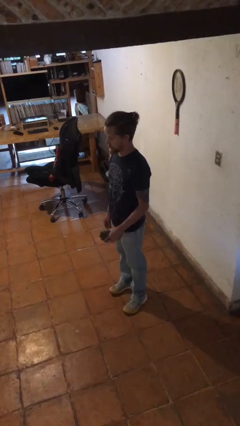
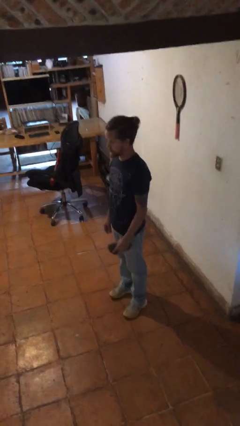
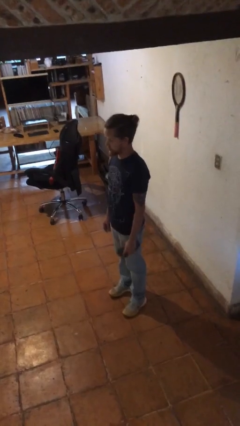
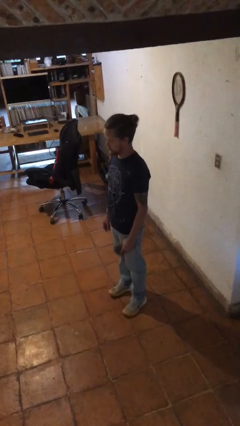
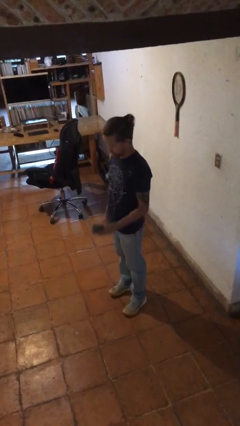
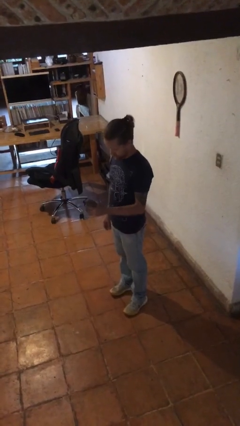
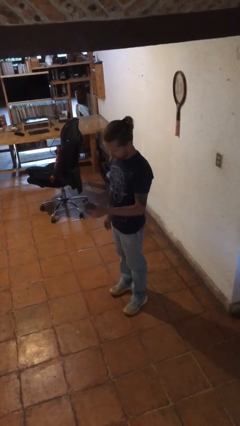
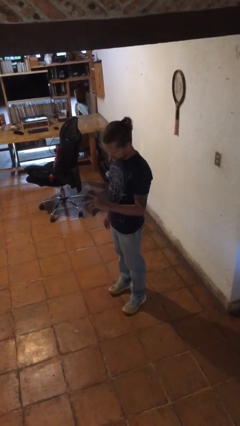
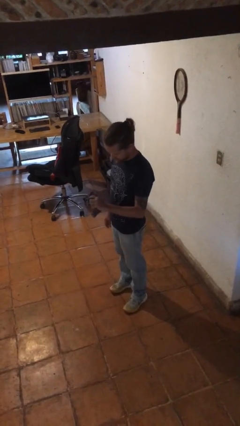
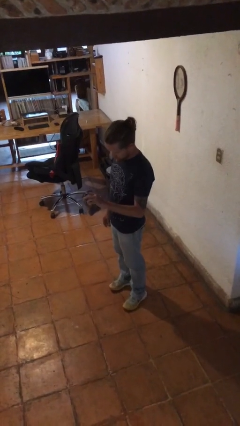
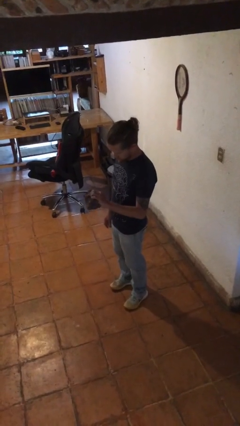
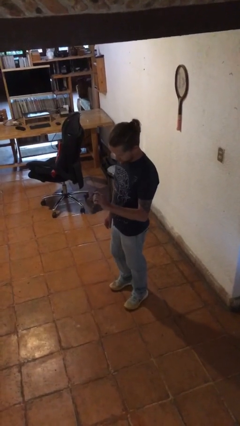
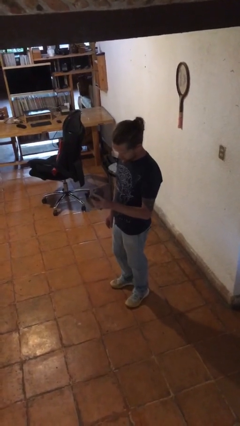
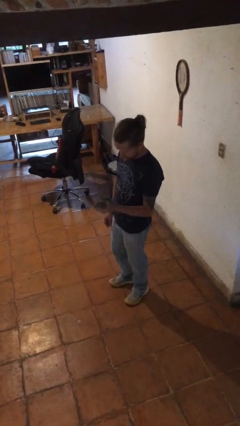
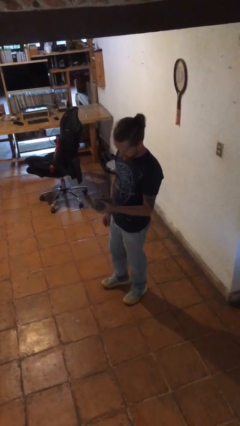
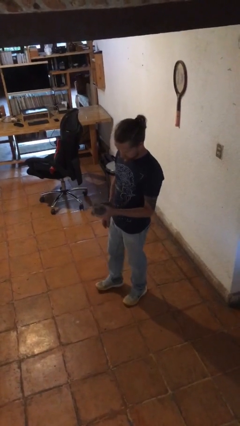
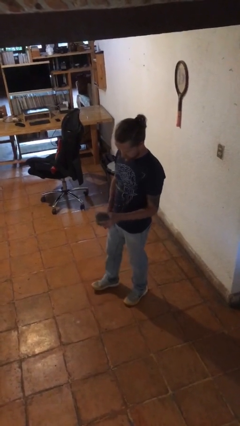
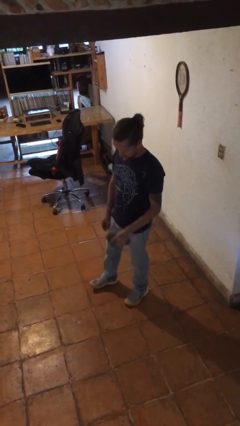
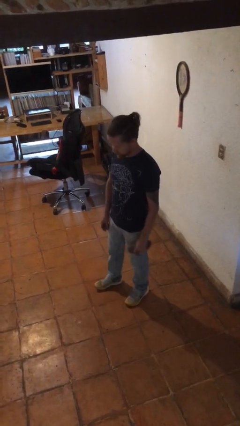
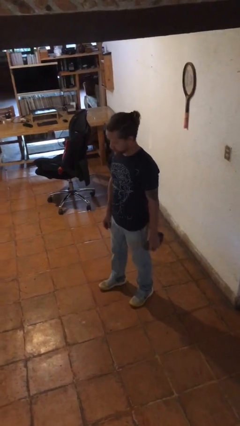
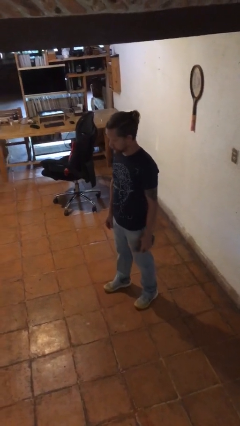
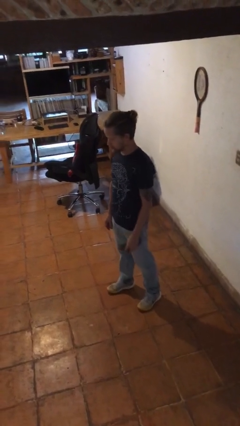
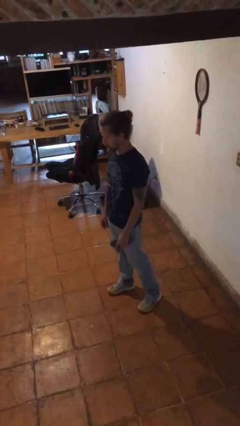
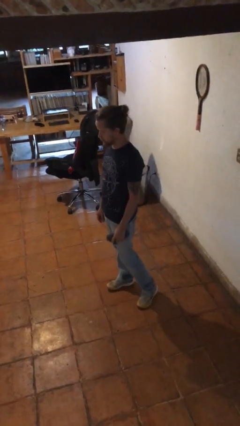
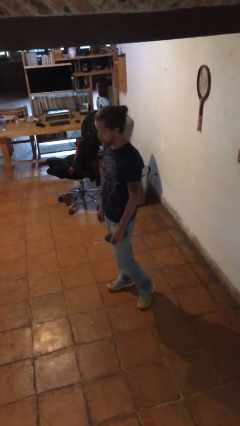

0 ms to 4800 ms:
person squeezes object

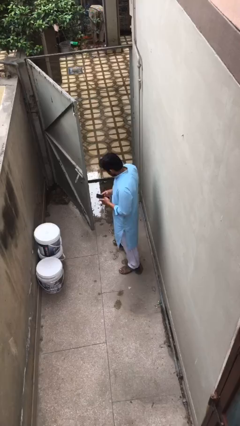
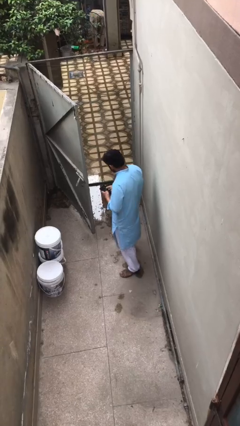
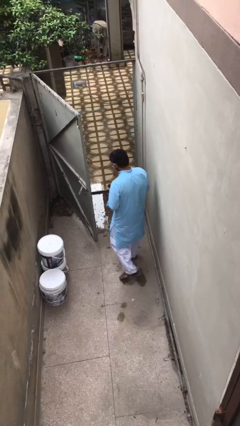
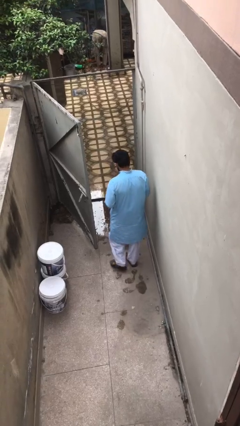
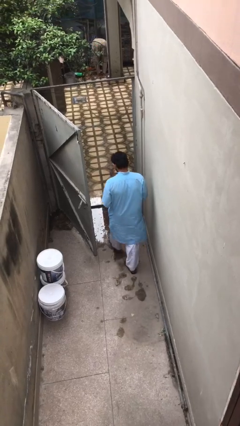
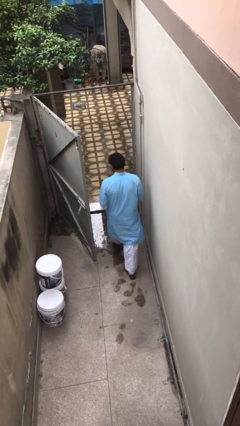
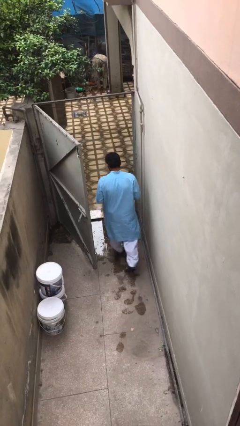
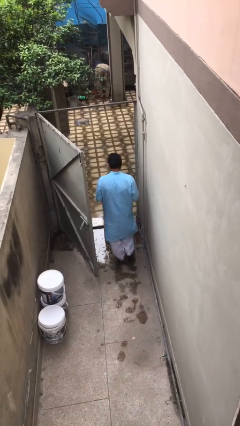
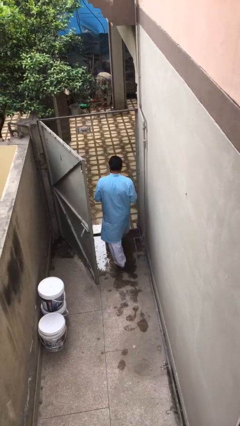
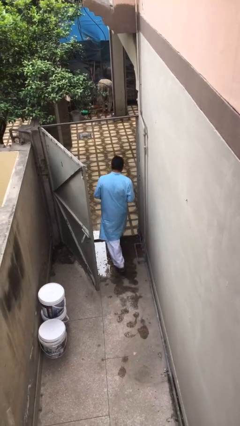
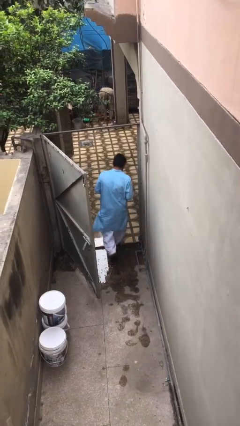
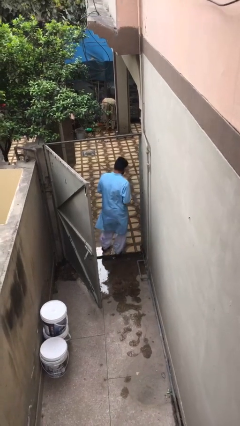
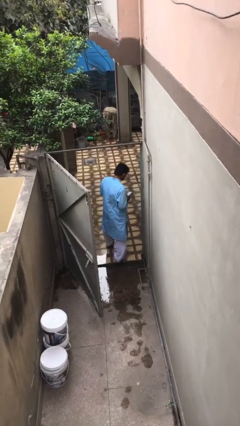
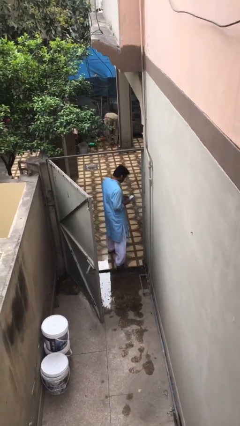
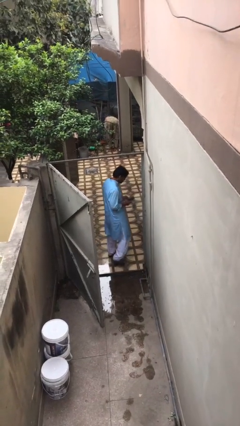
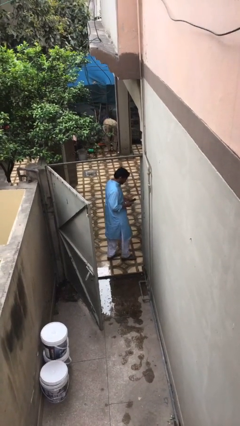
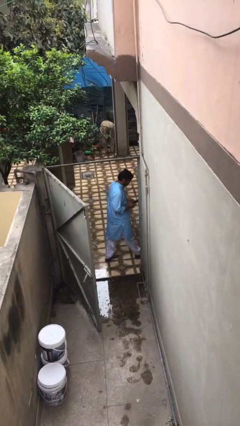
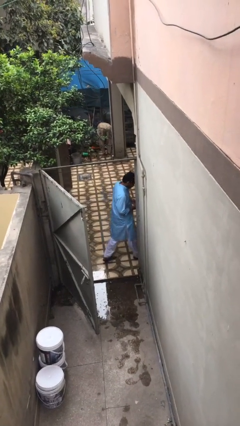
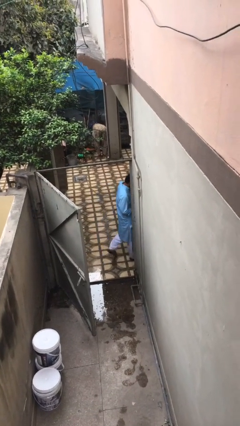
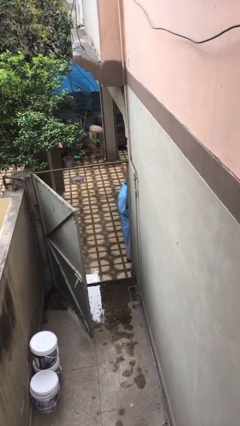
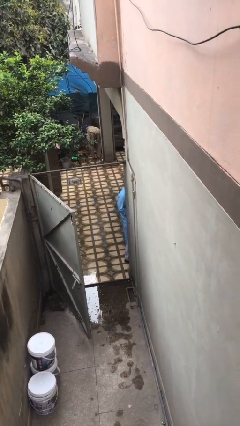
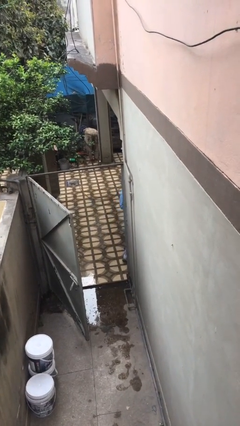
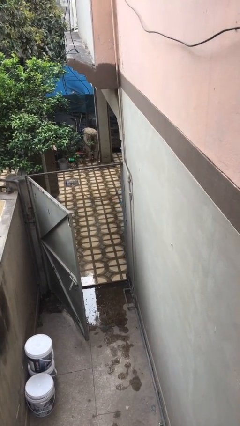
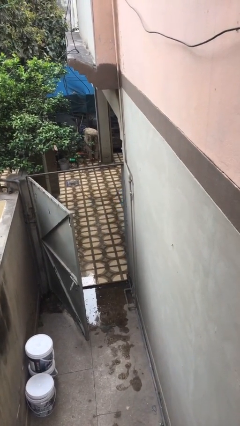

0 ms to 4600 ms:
person exits scene through structure

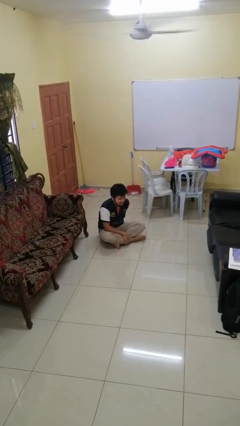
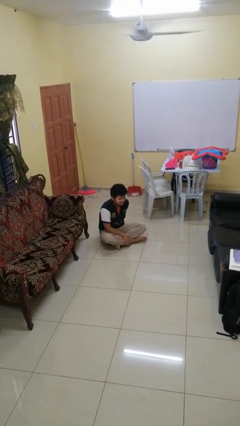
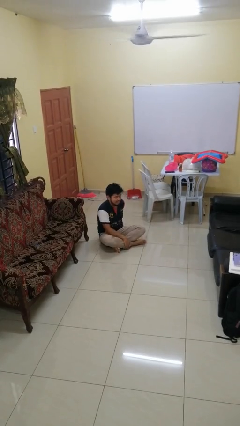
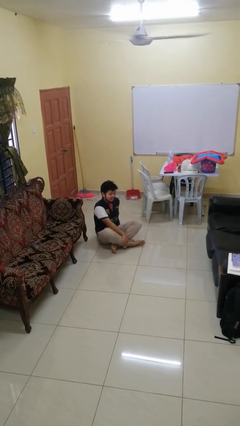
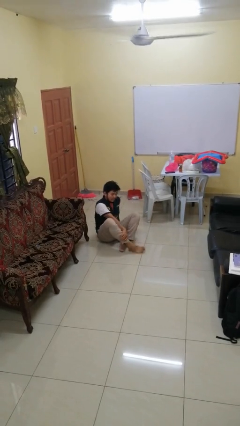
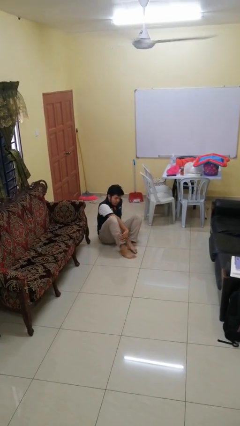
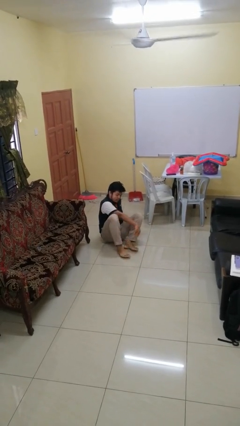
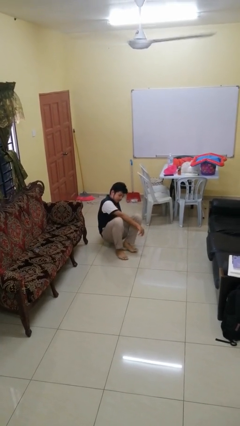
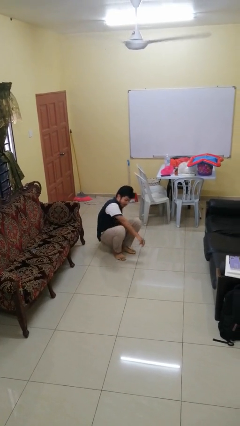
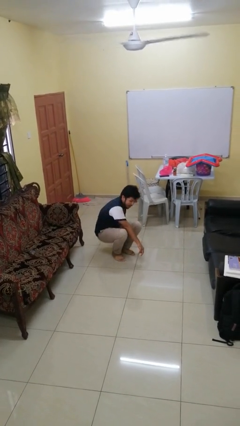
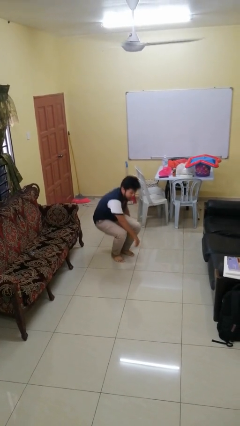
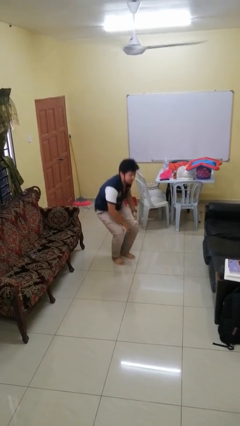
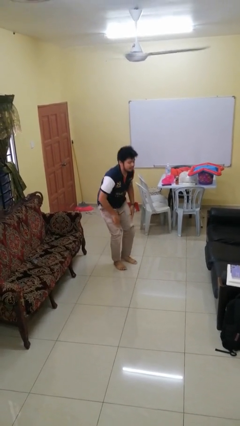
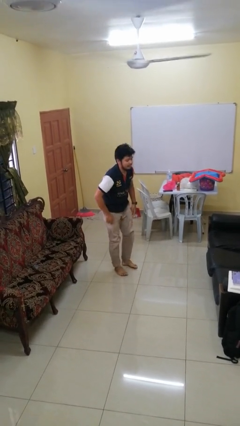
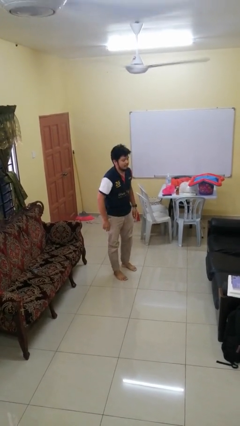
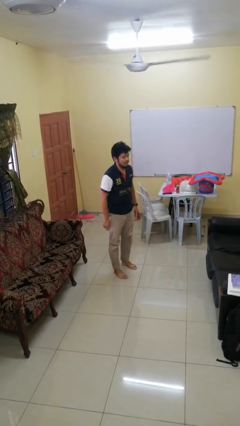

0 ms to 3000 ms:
person stands up from floor

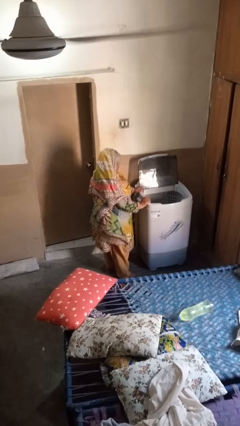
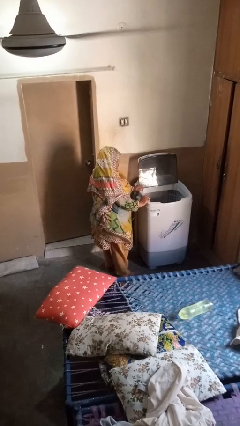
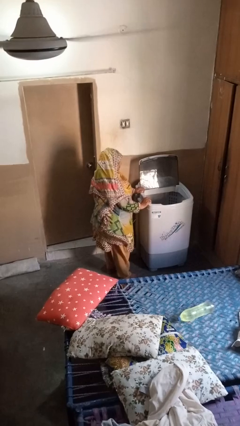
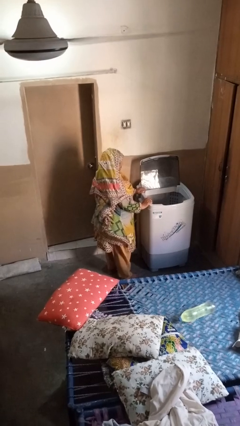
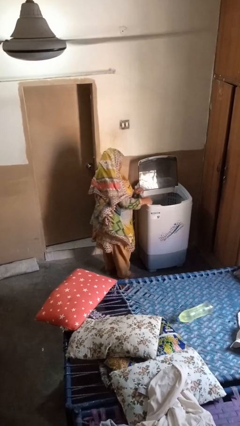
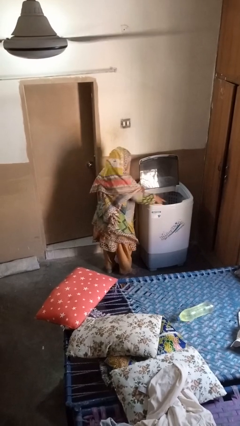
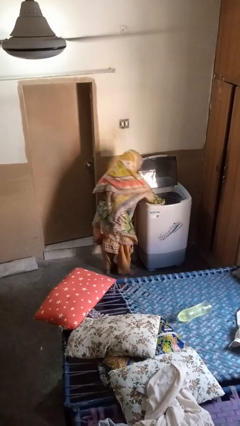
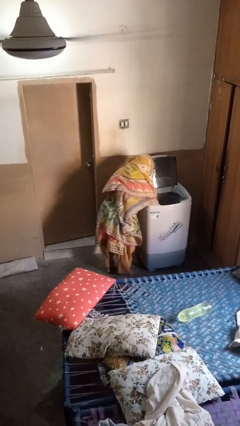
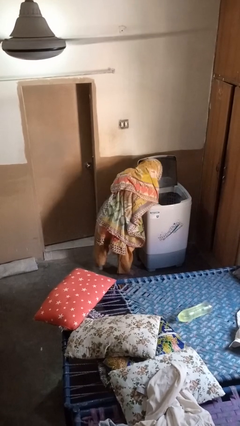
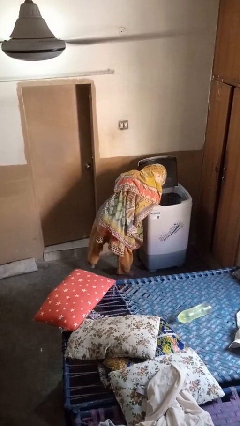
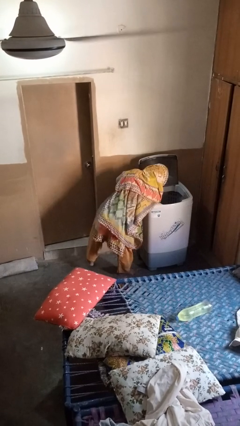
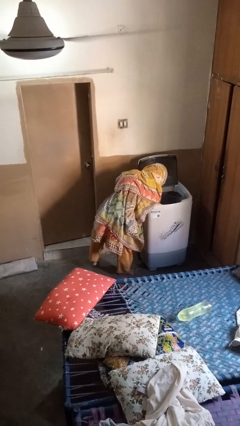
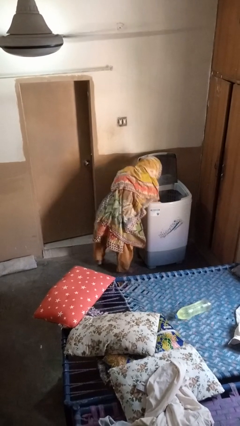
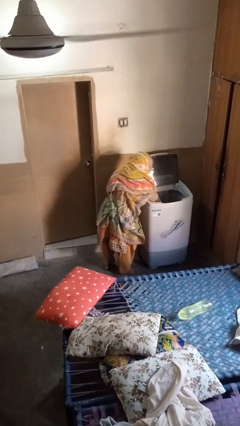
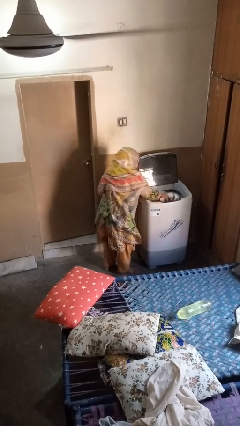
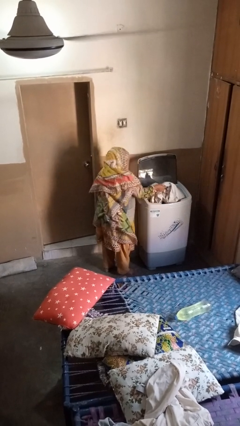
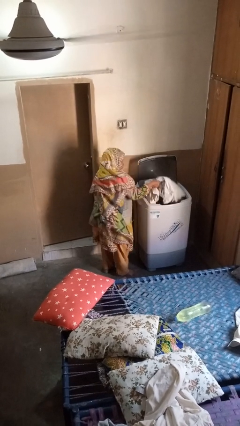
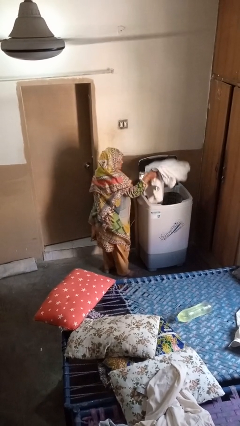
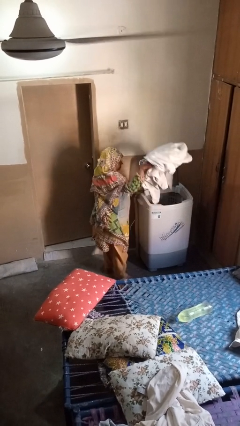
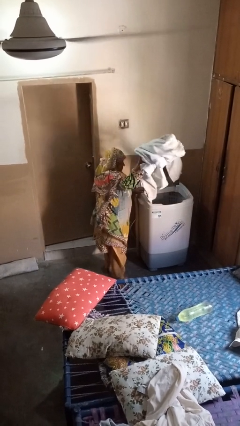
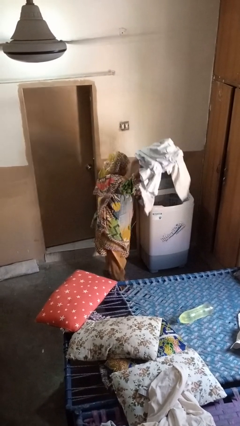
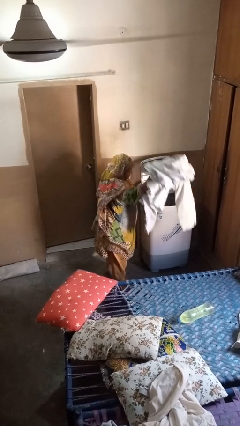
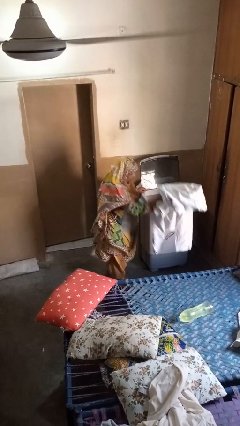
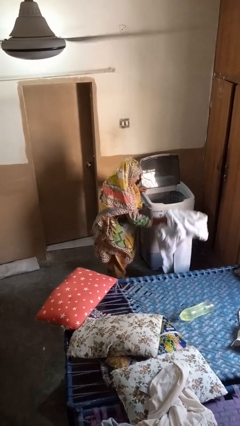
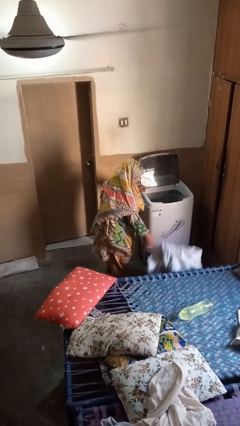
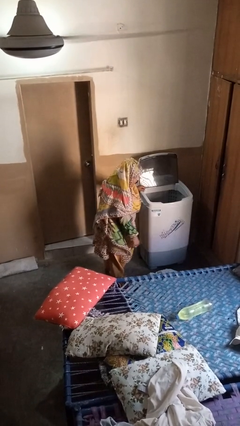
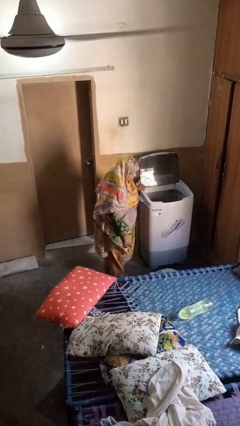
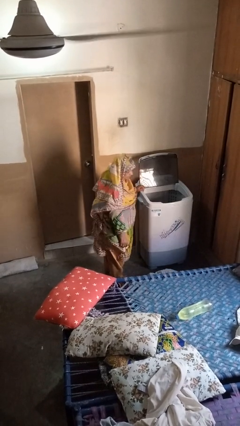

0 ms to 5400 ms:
person unloads clotheswasher
